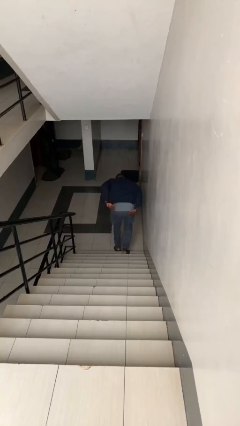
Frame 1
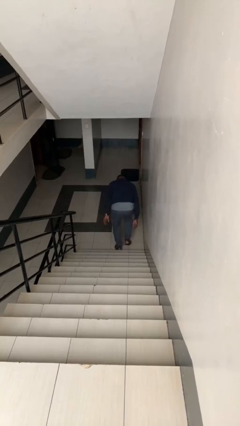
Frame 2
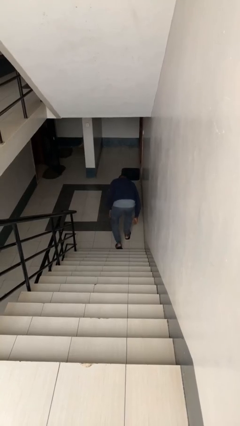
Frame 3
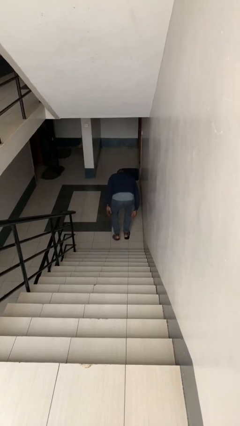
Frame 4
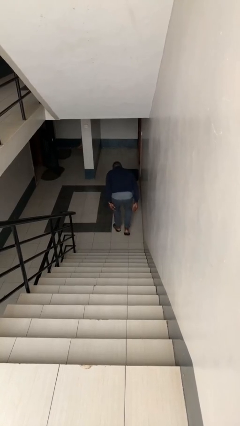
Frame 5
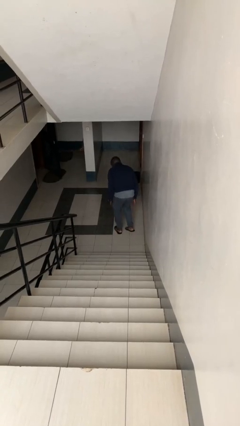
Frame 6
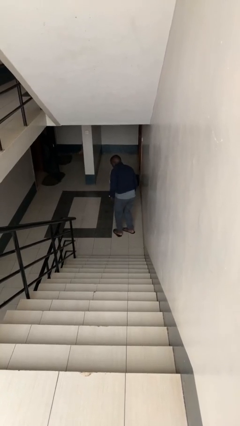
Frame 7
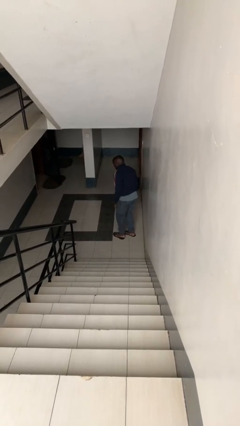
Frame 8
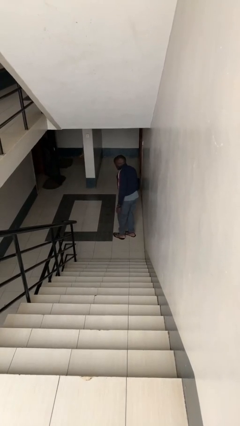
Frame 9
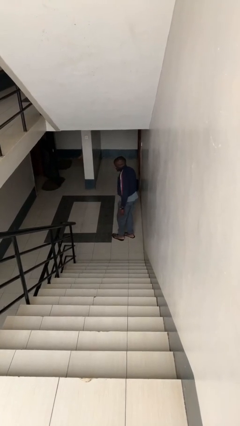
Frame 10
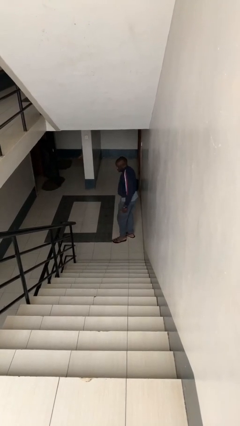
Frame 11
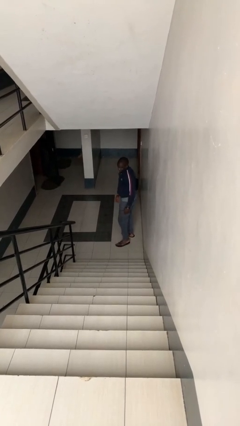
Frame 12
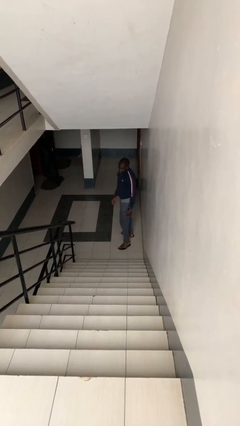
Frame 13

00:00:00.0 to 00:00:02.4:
person trips on stair

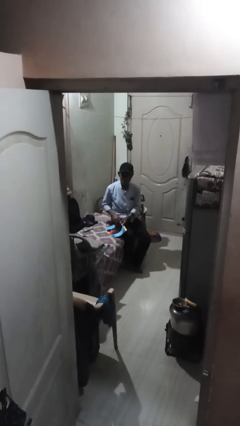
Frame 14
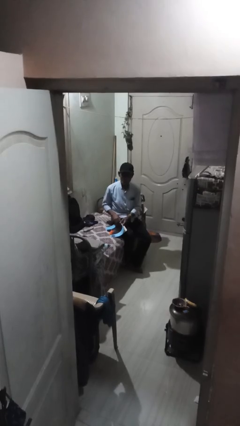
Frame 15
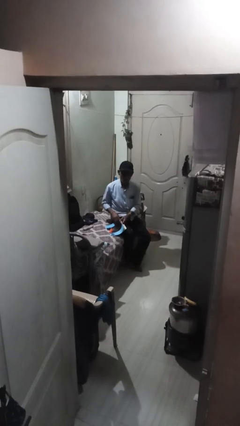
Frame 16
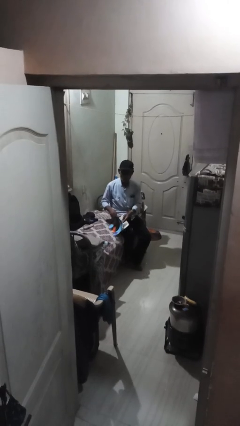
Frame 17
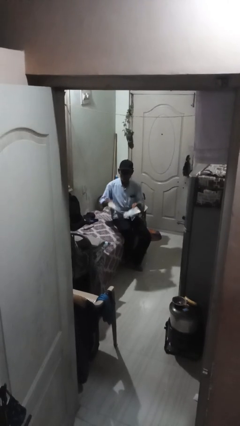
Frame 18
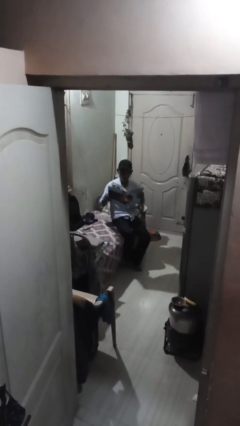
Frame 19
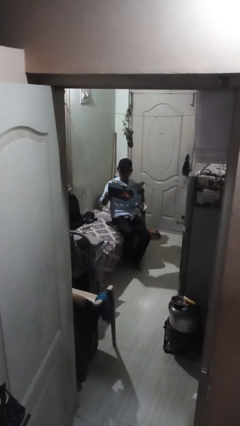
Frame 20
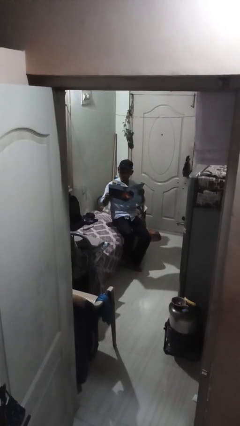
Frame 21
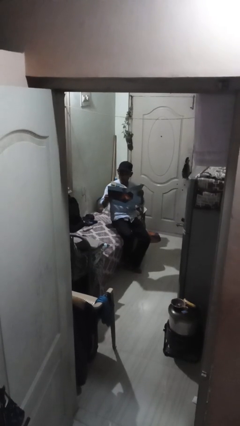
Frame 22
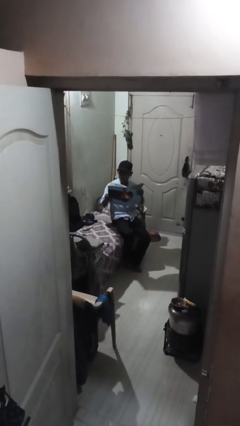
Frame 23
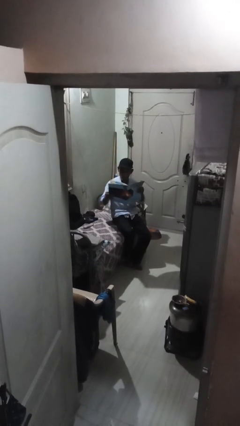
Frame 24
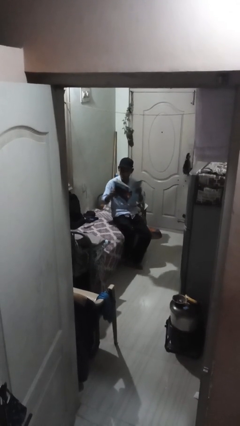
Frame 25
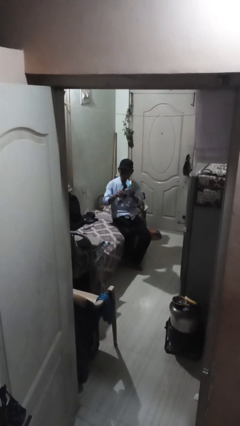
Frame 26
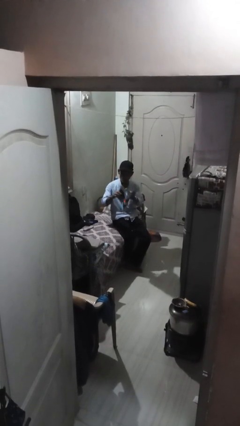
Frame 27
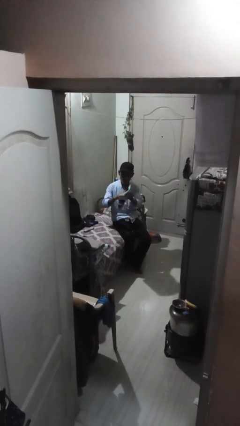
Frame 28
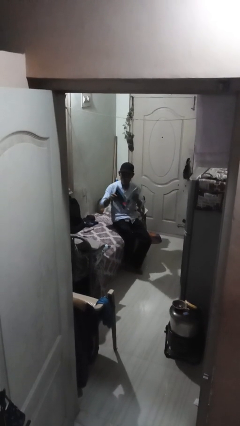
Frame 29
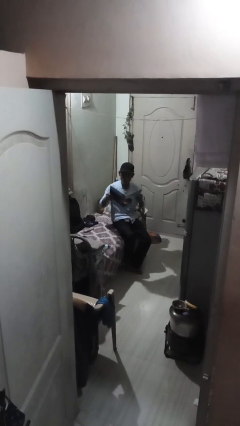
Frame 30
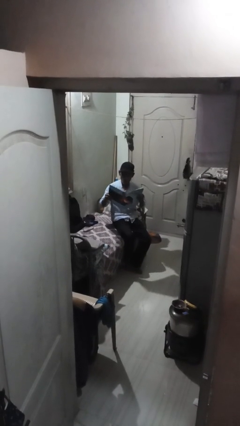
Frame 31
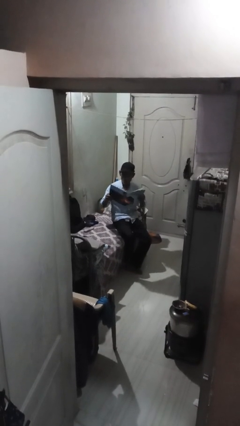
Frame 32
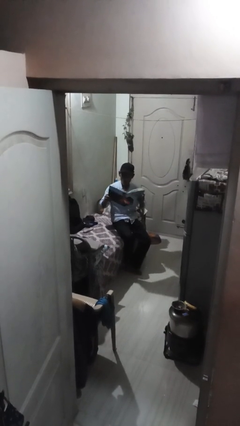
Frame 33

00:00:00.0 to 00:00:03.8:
person reads magazine

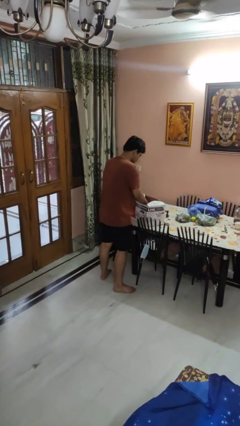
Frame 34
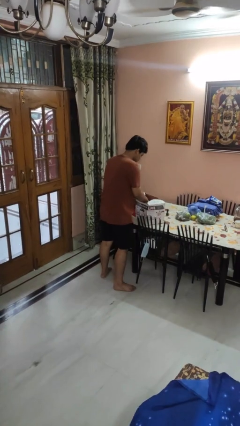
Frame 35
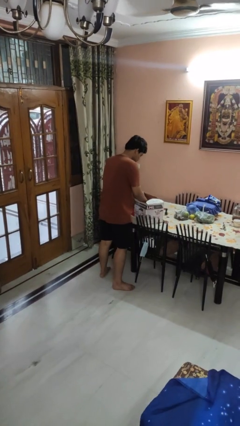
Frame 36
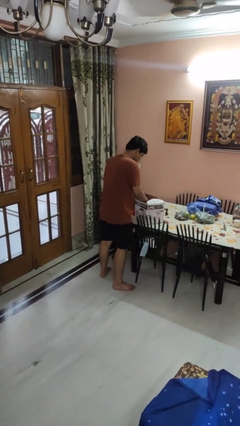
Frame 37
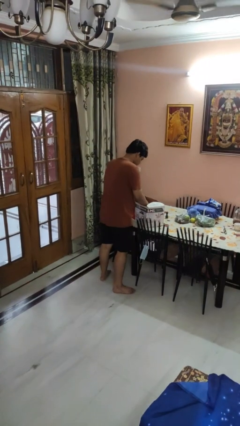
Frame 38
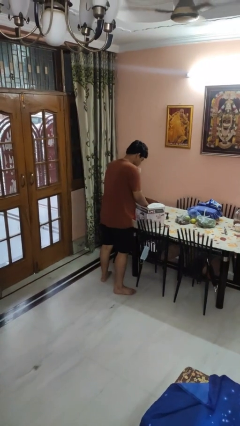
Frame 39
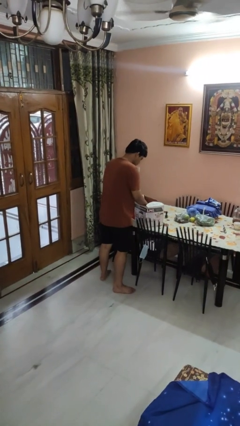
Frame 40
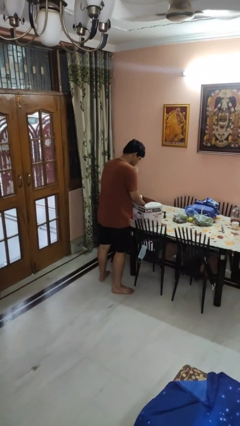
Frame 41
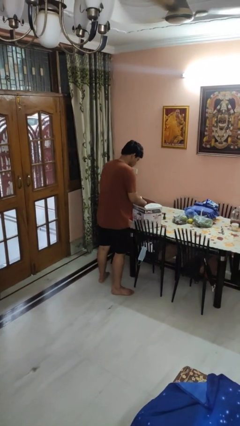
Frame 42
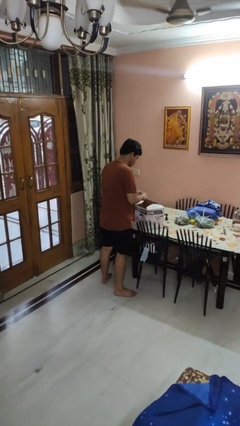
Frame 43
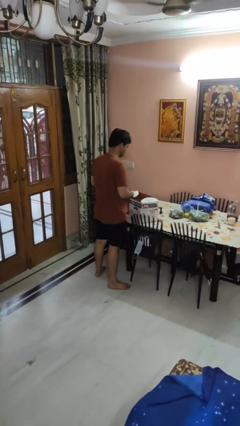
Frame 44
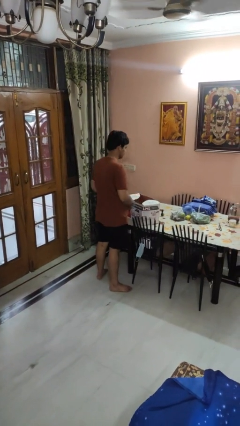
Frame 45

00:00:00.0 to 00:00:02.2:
person searches in box

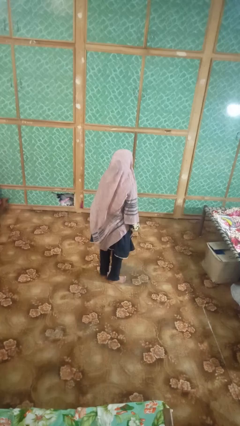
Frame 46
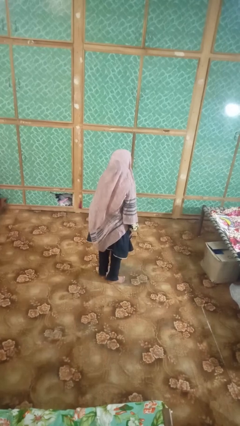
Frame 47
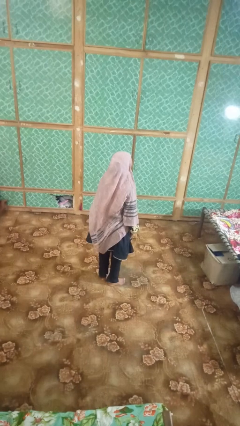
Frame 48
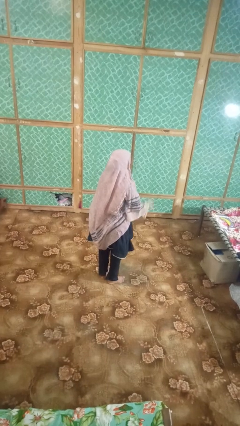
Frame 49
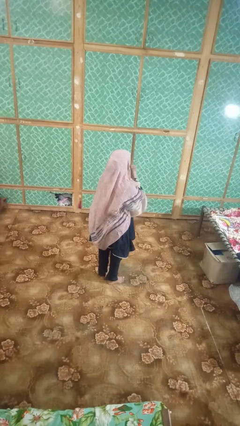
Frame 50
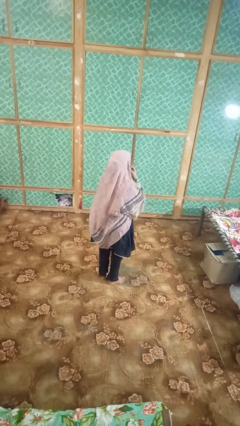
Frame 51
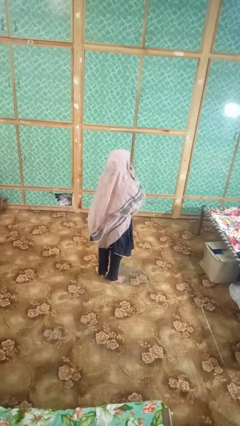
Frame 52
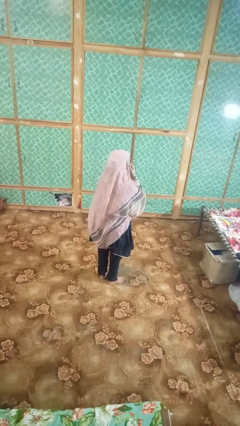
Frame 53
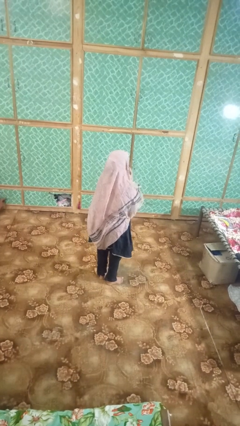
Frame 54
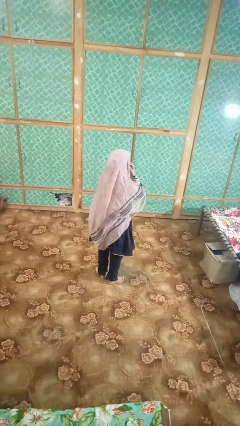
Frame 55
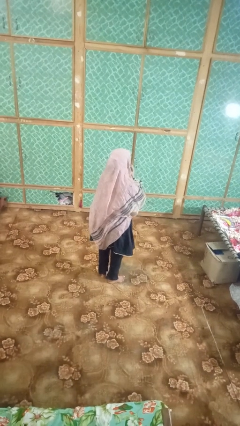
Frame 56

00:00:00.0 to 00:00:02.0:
person strokes chin

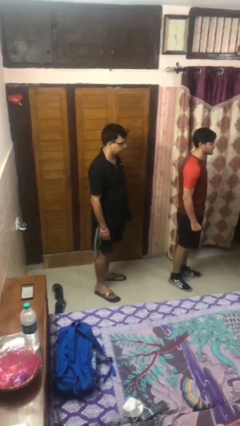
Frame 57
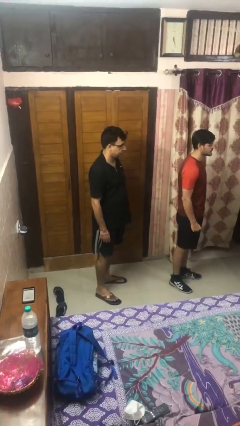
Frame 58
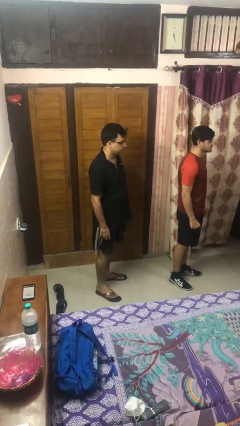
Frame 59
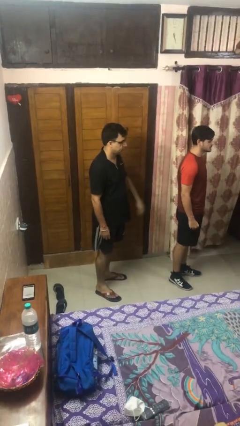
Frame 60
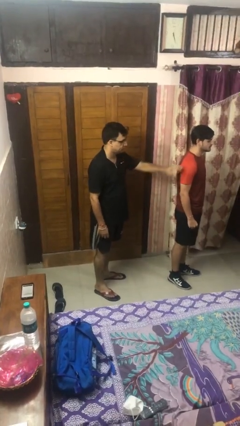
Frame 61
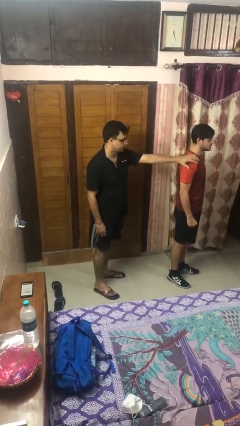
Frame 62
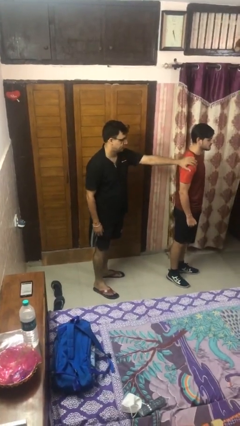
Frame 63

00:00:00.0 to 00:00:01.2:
person grabs person by shoulder

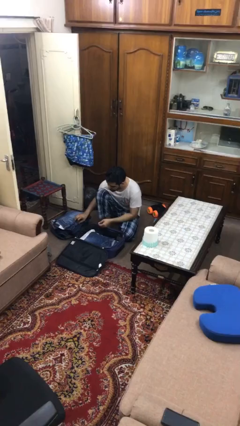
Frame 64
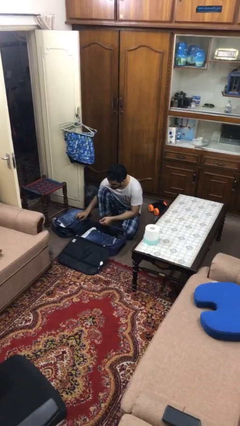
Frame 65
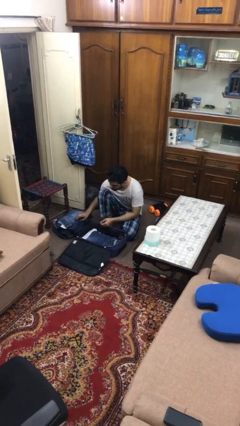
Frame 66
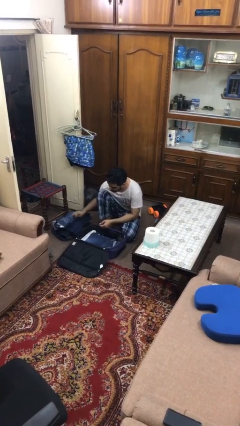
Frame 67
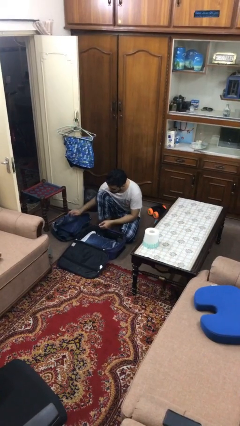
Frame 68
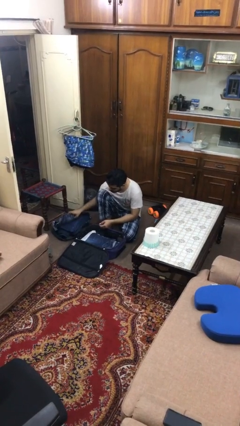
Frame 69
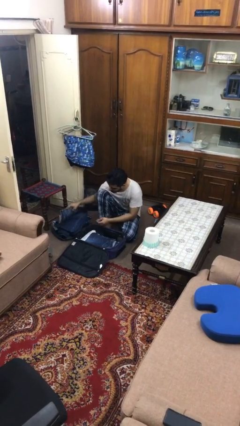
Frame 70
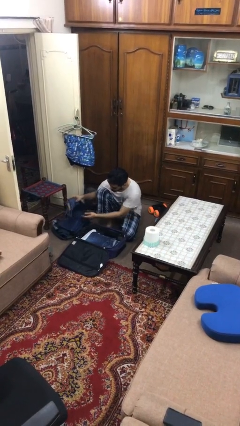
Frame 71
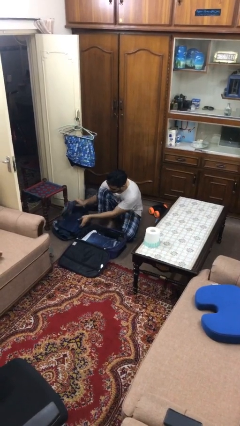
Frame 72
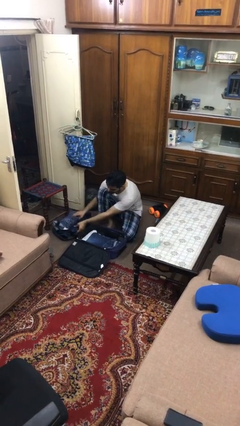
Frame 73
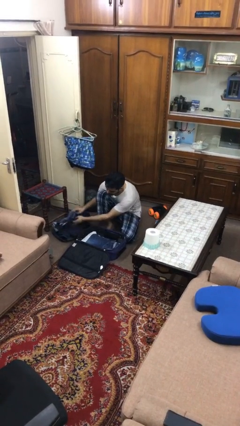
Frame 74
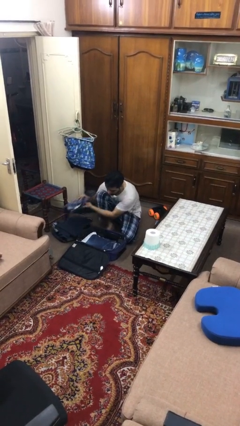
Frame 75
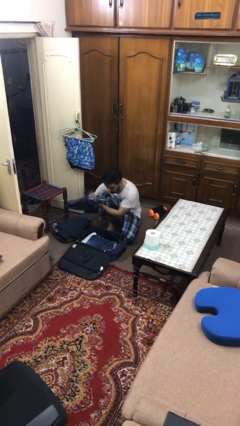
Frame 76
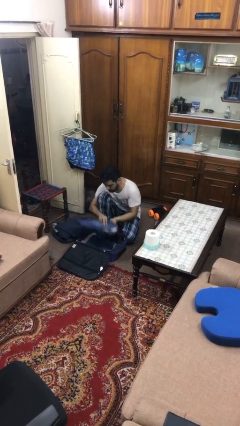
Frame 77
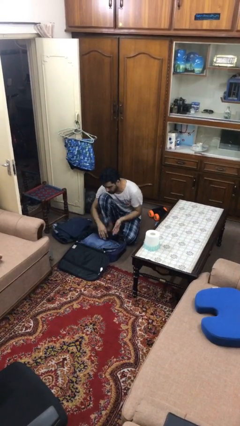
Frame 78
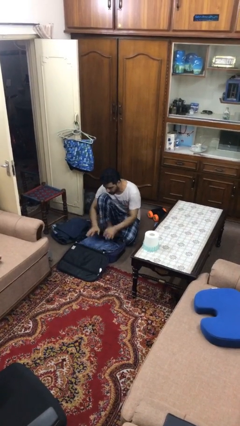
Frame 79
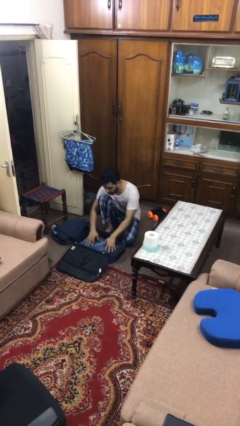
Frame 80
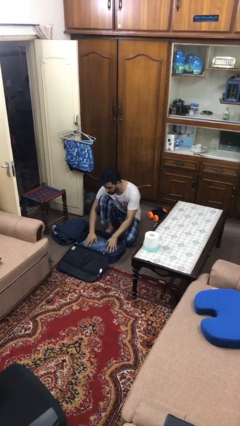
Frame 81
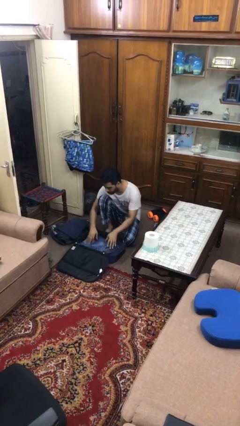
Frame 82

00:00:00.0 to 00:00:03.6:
person loads clothes into suitcase

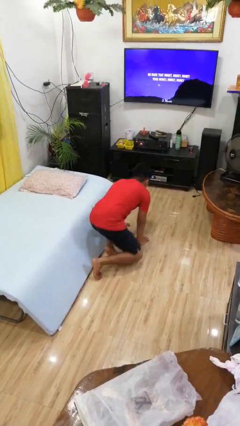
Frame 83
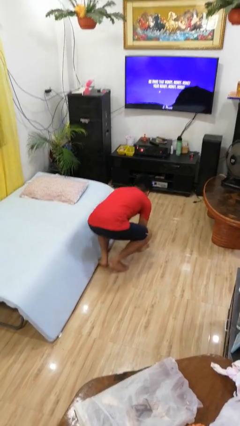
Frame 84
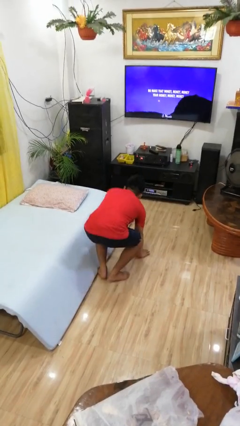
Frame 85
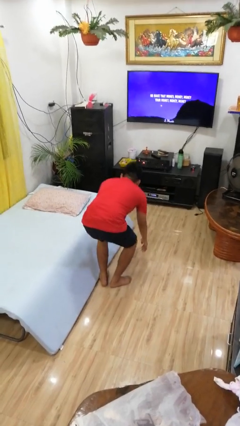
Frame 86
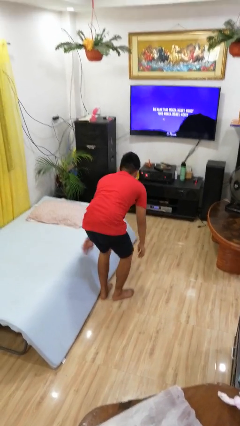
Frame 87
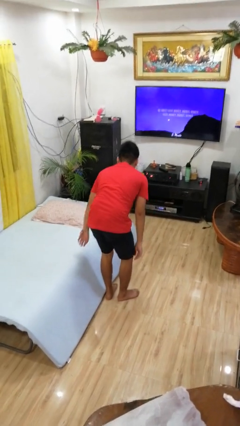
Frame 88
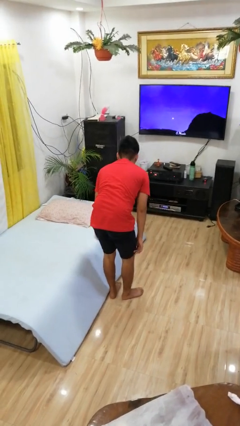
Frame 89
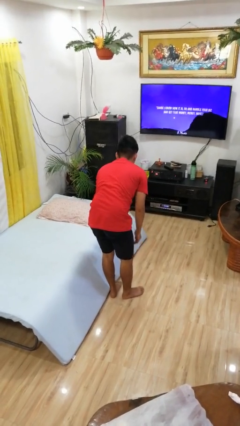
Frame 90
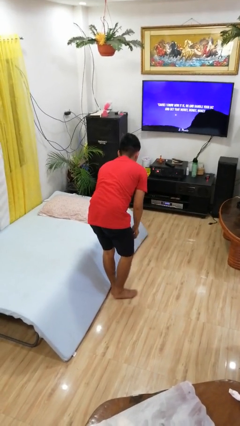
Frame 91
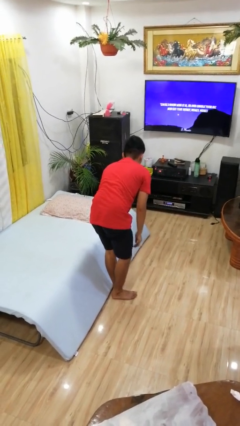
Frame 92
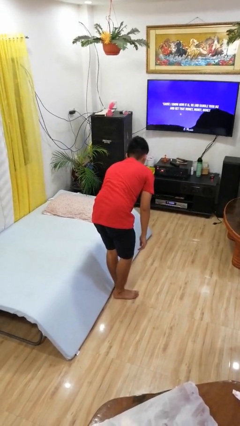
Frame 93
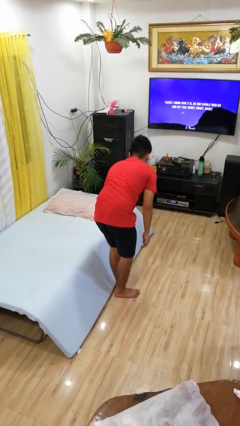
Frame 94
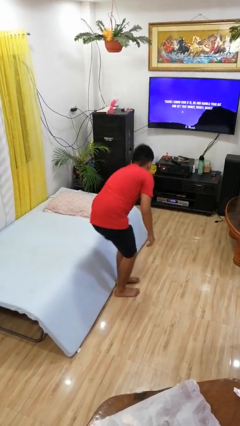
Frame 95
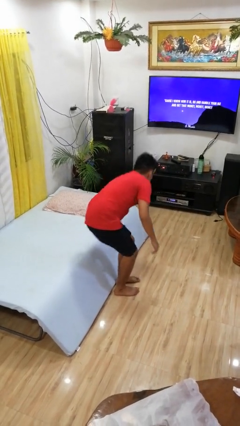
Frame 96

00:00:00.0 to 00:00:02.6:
person stands up from floor
